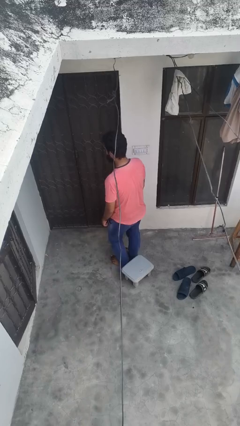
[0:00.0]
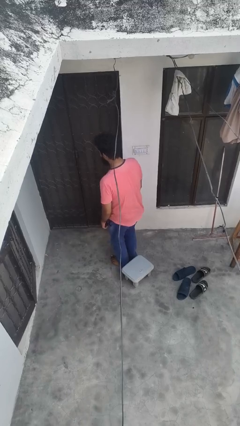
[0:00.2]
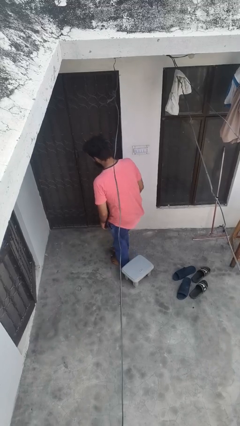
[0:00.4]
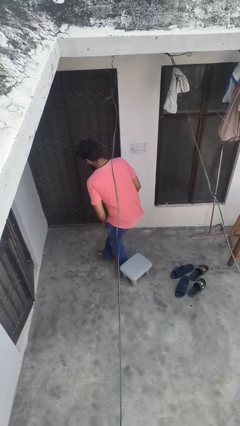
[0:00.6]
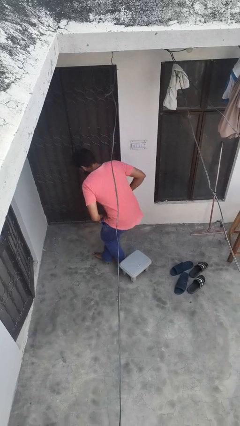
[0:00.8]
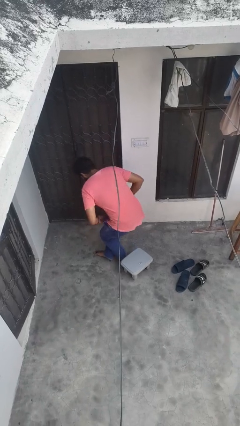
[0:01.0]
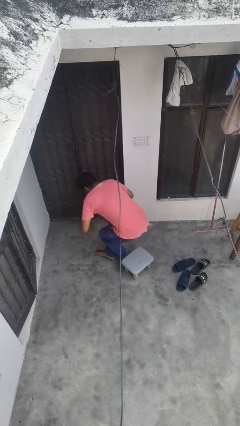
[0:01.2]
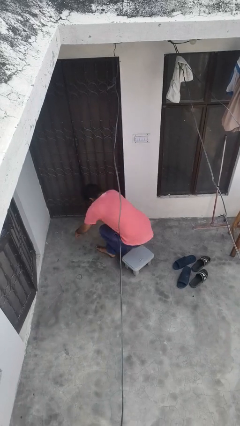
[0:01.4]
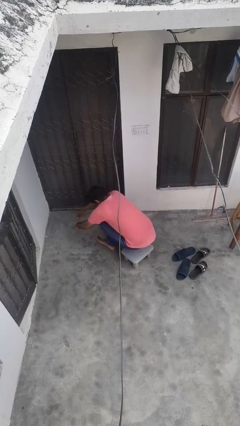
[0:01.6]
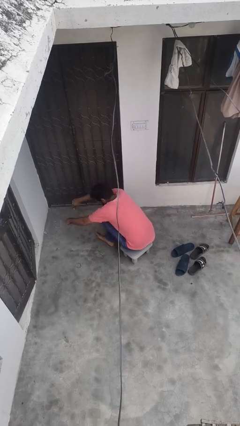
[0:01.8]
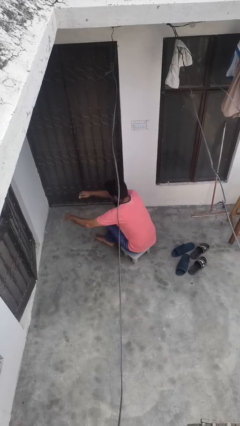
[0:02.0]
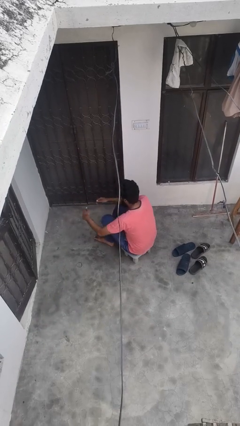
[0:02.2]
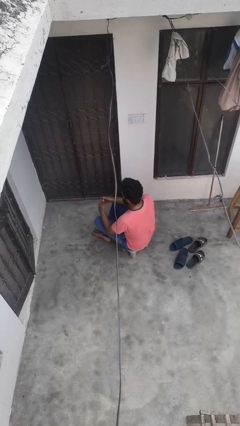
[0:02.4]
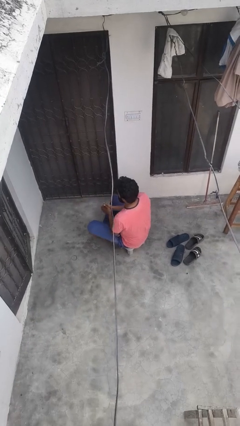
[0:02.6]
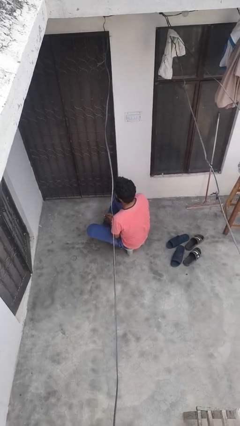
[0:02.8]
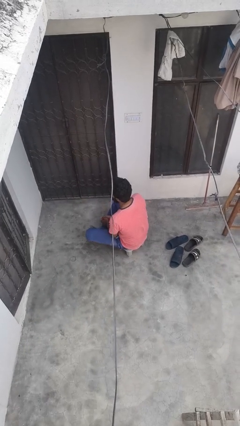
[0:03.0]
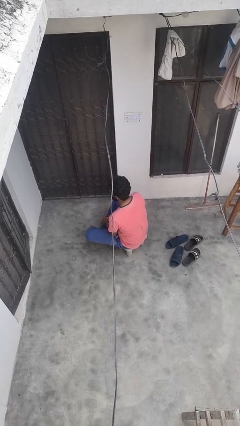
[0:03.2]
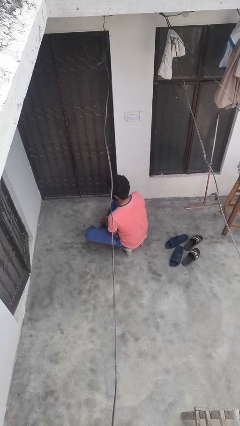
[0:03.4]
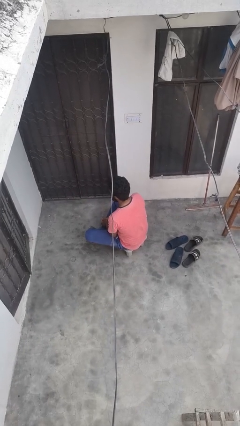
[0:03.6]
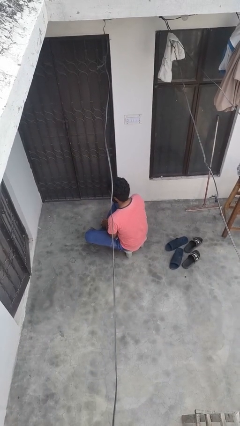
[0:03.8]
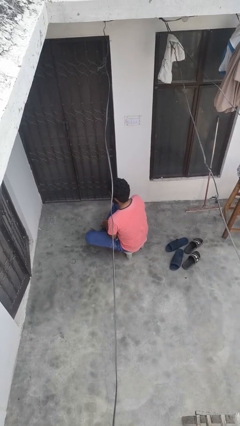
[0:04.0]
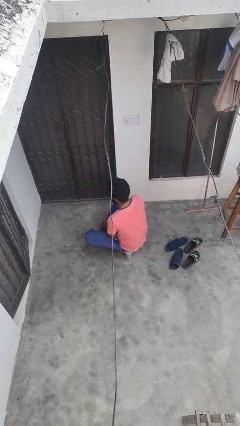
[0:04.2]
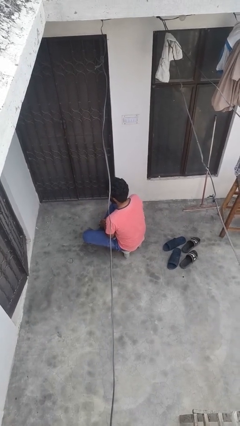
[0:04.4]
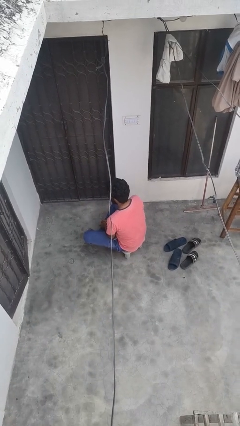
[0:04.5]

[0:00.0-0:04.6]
person sits crisscross

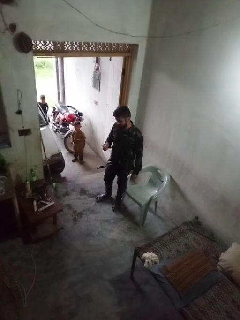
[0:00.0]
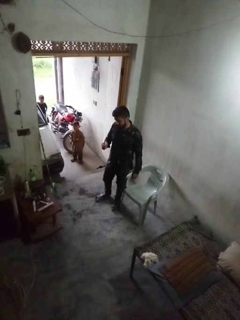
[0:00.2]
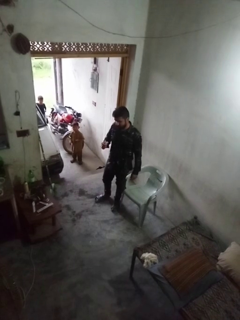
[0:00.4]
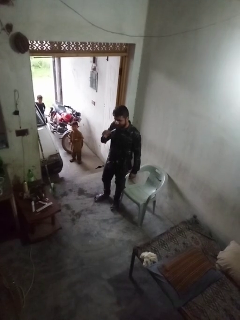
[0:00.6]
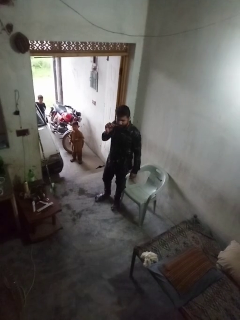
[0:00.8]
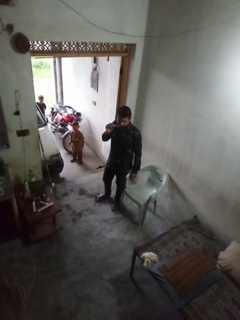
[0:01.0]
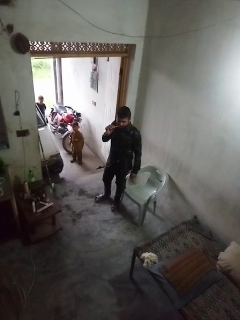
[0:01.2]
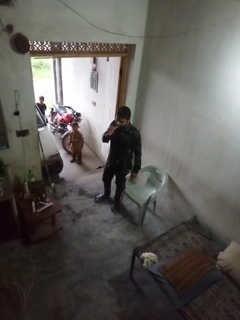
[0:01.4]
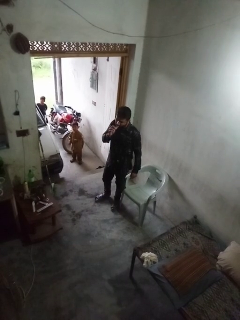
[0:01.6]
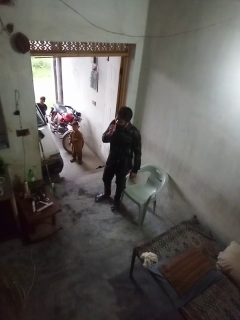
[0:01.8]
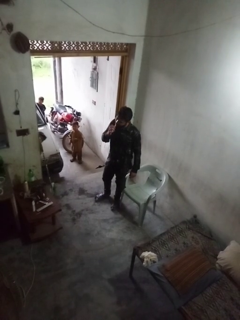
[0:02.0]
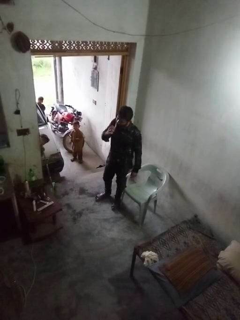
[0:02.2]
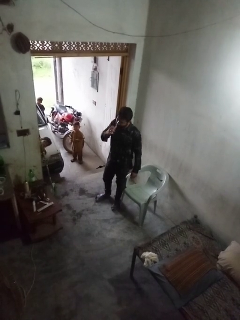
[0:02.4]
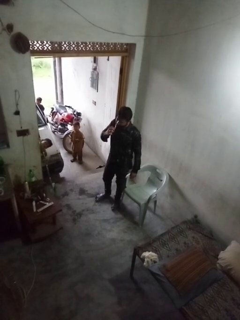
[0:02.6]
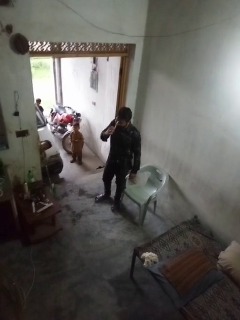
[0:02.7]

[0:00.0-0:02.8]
person brushes teeth

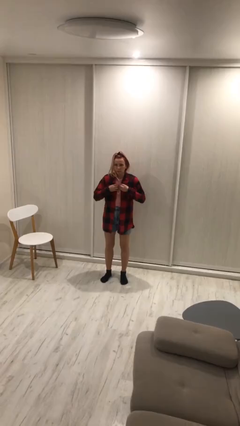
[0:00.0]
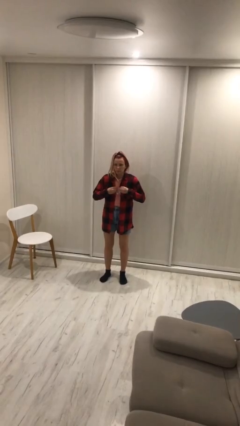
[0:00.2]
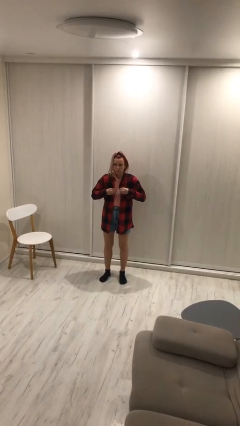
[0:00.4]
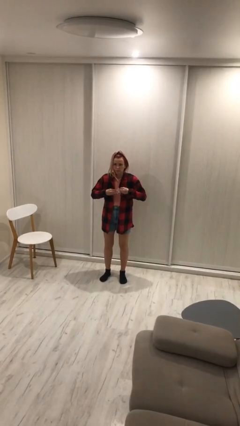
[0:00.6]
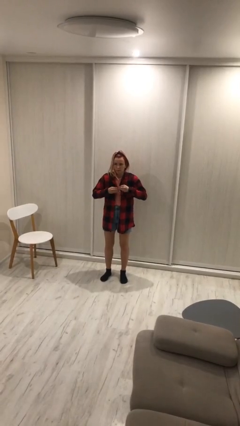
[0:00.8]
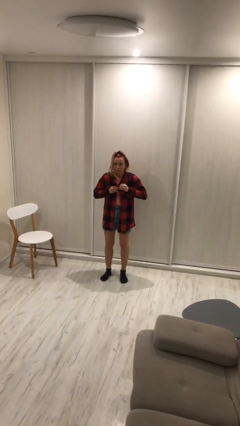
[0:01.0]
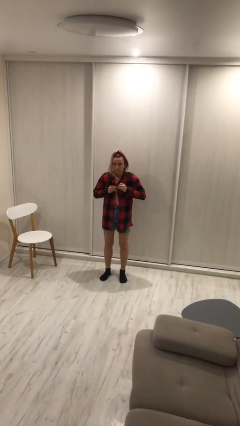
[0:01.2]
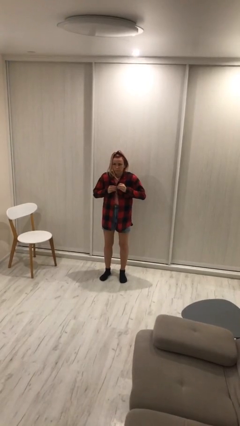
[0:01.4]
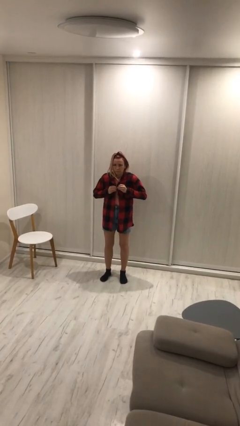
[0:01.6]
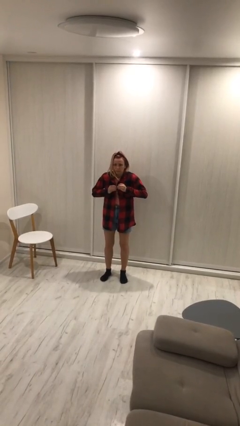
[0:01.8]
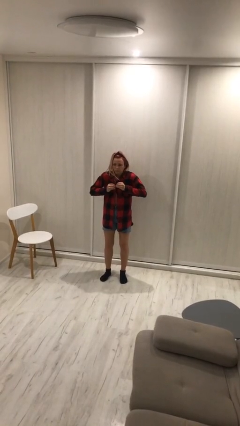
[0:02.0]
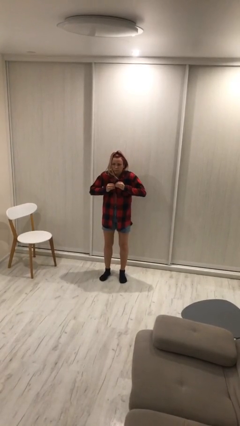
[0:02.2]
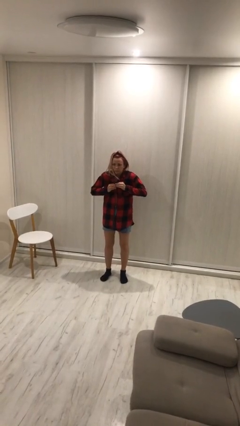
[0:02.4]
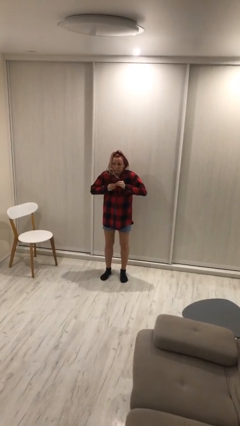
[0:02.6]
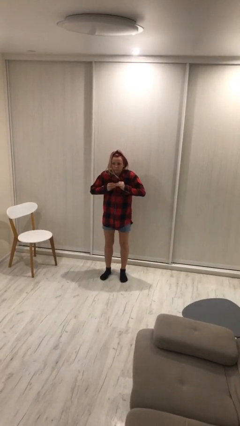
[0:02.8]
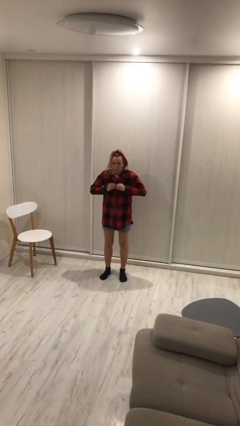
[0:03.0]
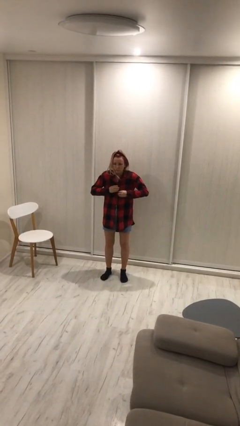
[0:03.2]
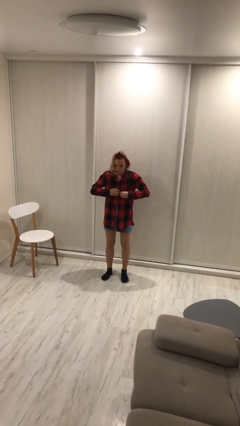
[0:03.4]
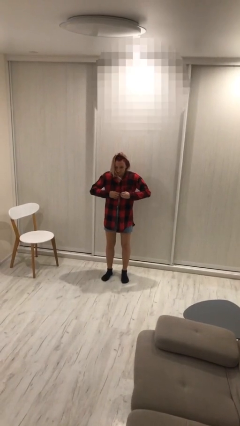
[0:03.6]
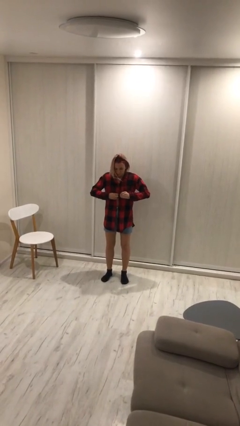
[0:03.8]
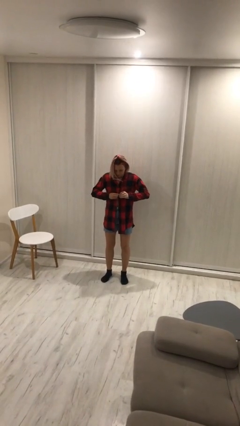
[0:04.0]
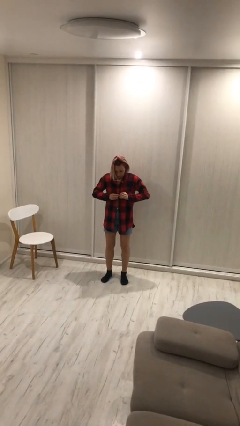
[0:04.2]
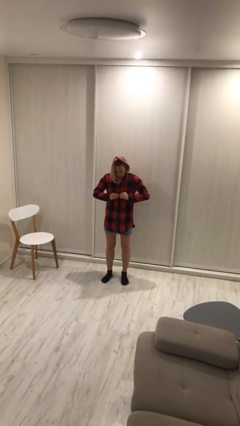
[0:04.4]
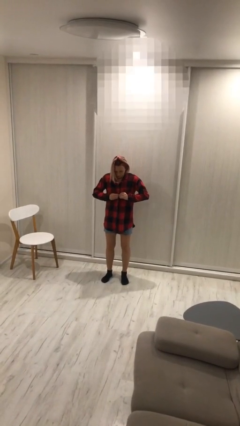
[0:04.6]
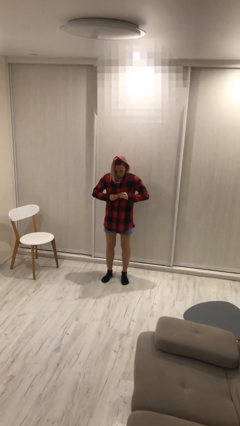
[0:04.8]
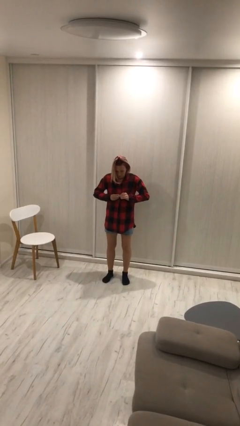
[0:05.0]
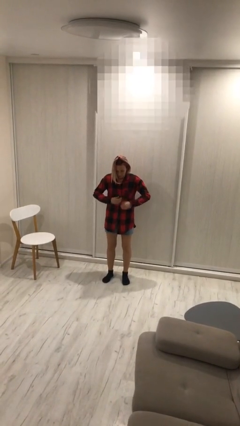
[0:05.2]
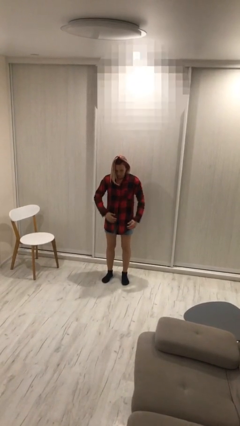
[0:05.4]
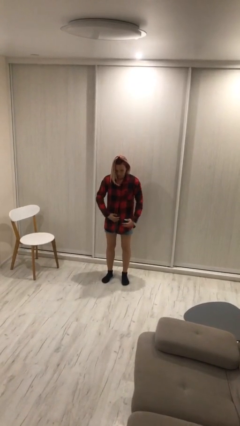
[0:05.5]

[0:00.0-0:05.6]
person buttons shirt

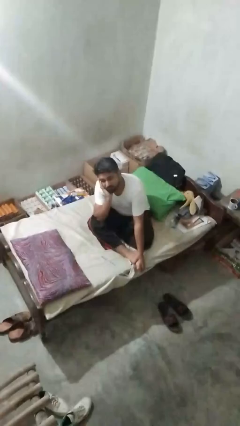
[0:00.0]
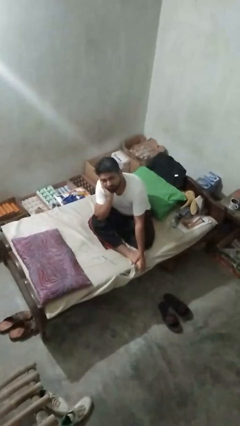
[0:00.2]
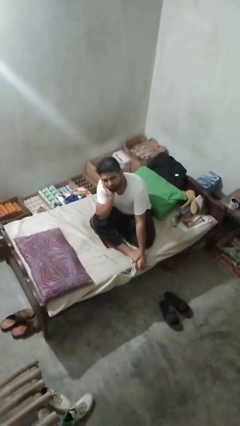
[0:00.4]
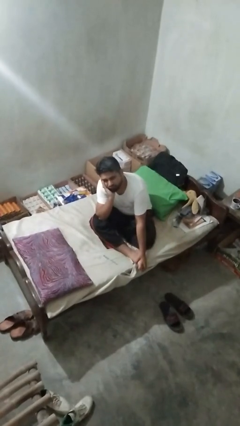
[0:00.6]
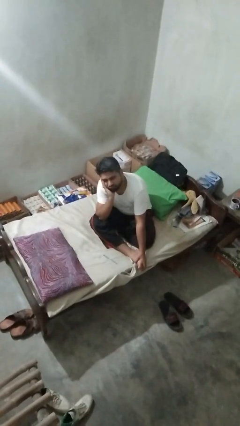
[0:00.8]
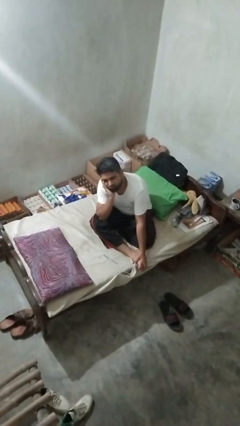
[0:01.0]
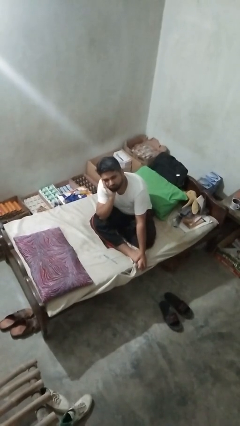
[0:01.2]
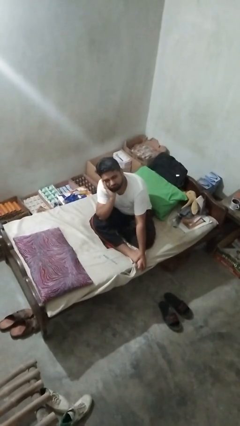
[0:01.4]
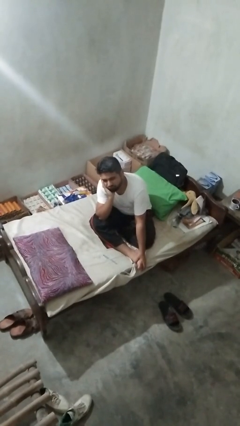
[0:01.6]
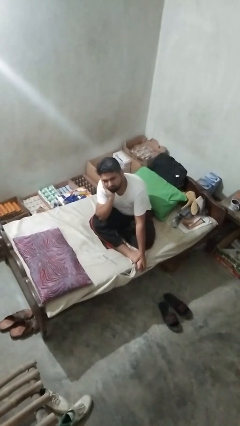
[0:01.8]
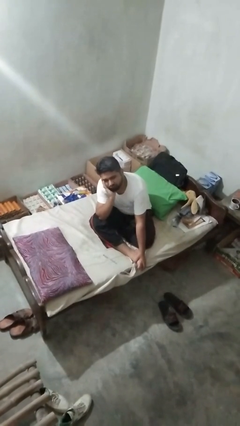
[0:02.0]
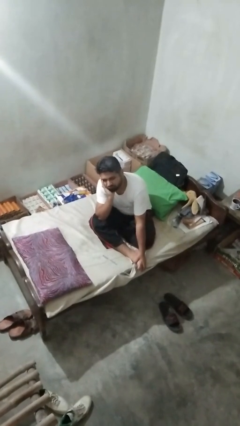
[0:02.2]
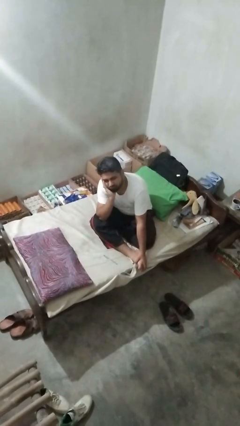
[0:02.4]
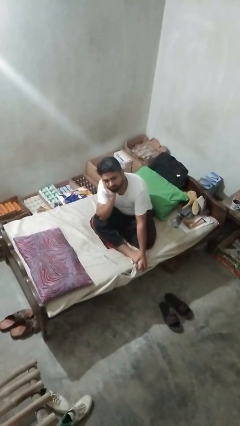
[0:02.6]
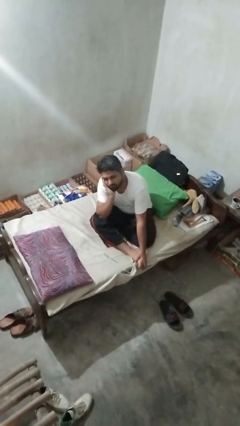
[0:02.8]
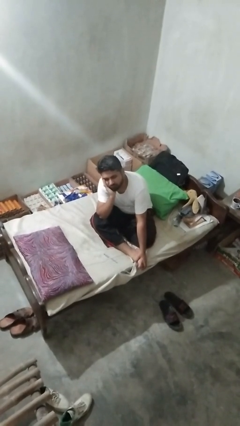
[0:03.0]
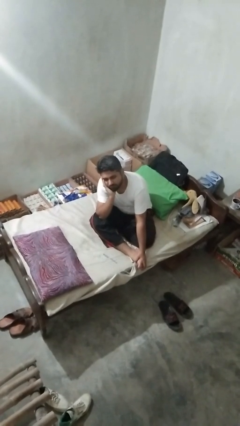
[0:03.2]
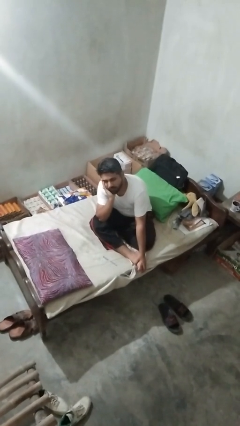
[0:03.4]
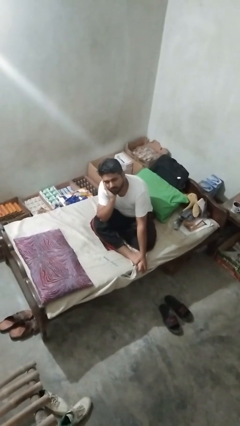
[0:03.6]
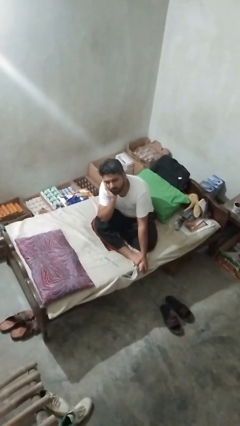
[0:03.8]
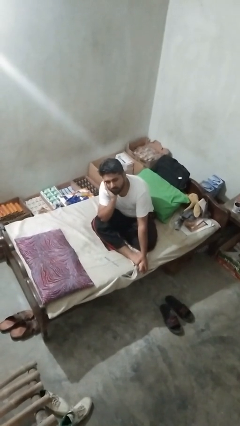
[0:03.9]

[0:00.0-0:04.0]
person strokes chin

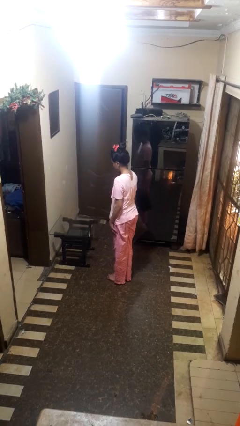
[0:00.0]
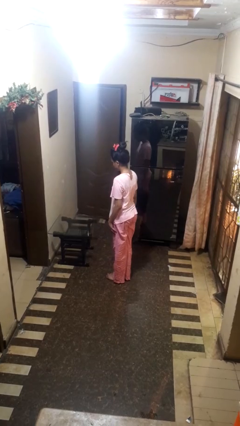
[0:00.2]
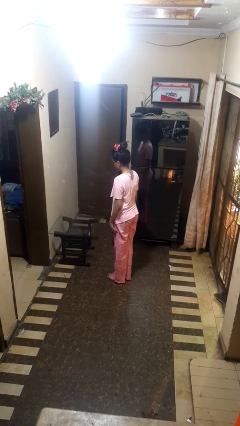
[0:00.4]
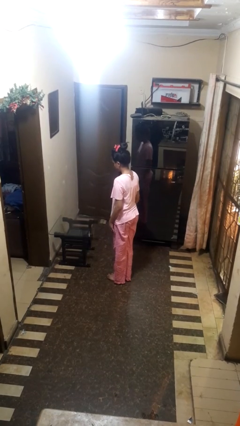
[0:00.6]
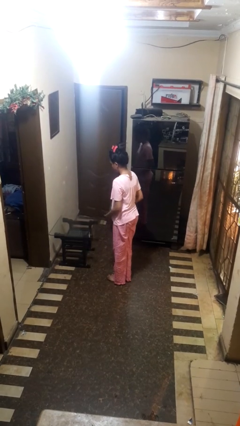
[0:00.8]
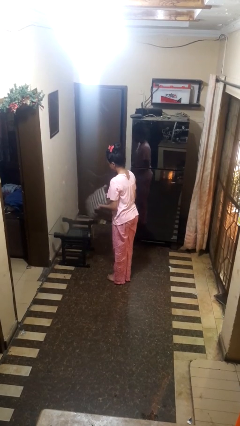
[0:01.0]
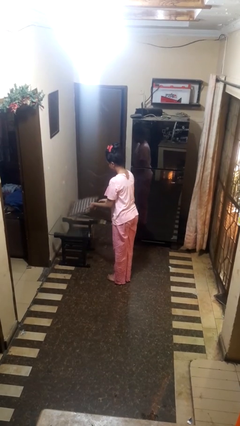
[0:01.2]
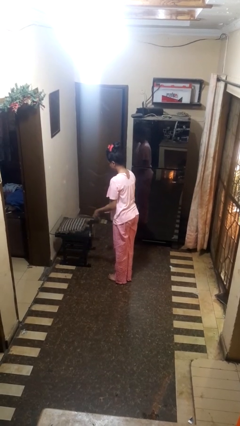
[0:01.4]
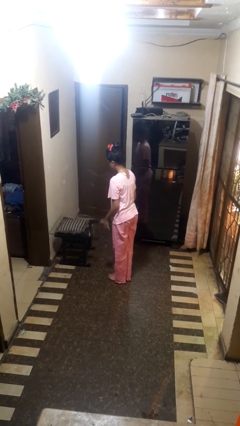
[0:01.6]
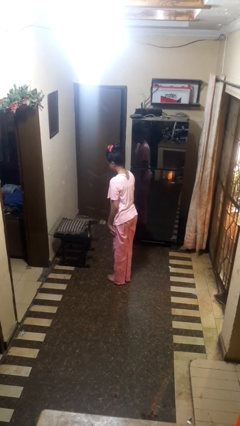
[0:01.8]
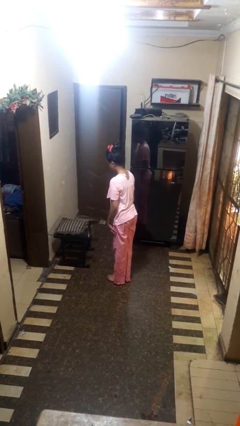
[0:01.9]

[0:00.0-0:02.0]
person throws object on table
